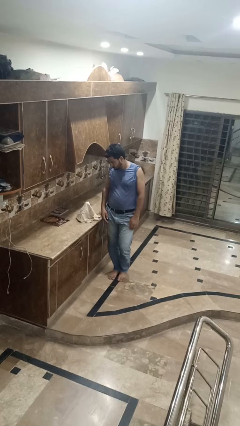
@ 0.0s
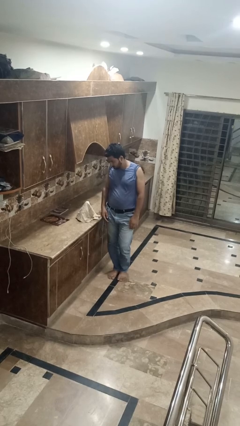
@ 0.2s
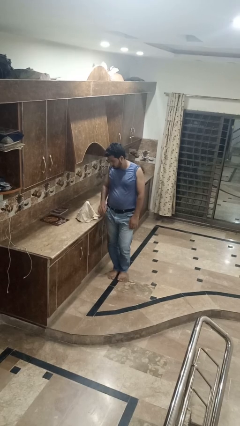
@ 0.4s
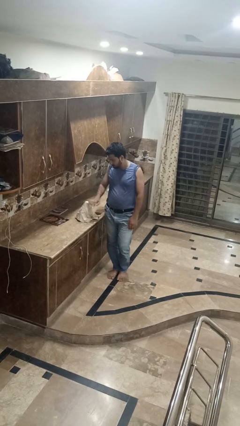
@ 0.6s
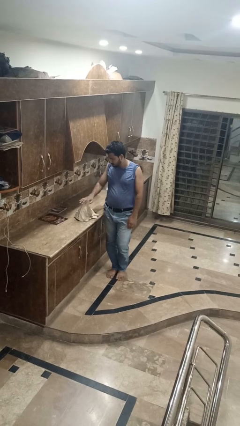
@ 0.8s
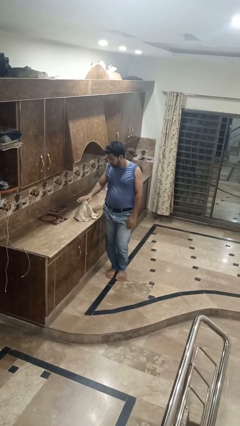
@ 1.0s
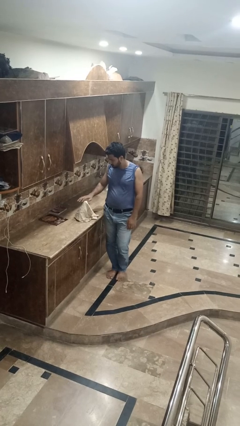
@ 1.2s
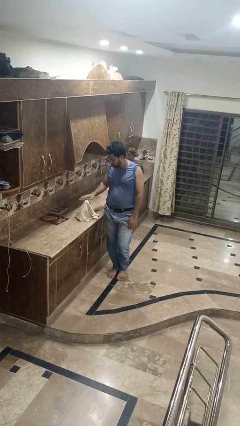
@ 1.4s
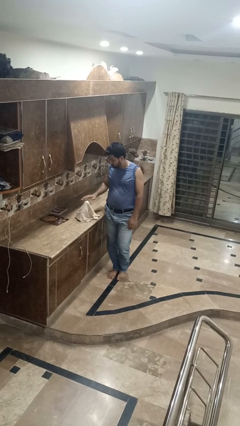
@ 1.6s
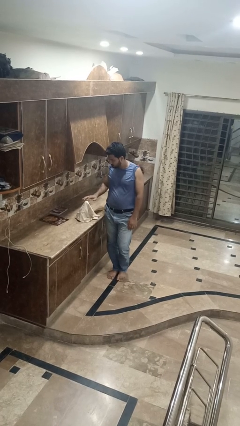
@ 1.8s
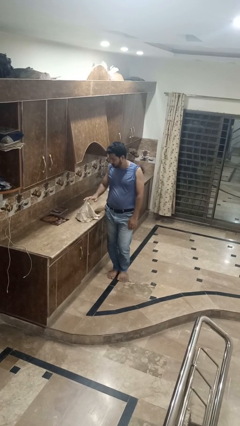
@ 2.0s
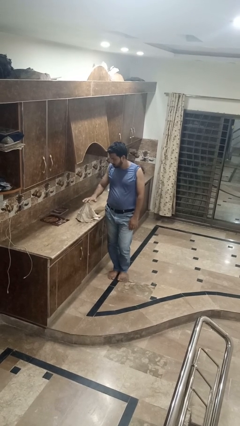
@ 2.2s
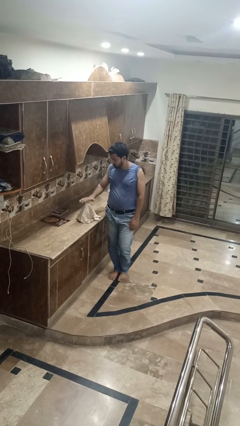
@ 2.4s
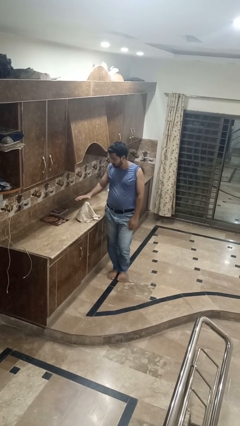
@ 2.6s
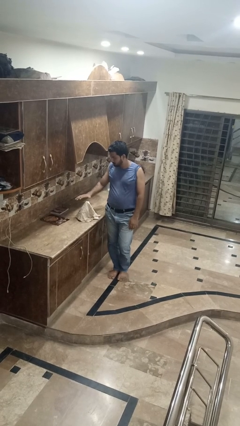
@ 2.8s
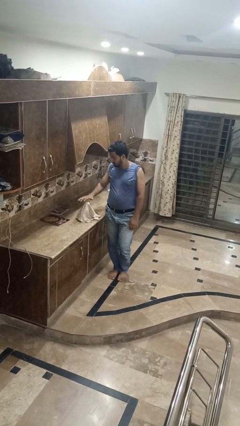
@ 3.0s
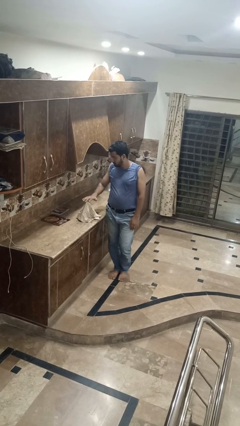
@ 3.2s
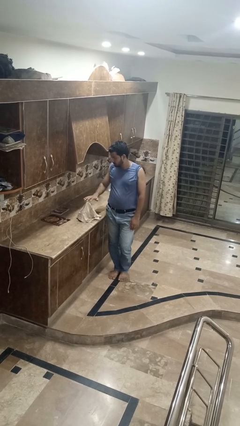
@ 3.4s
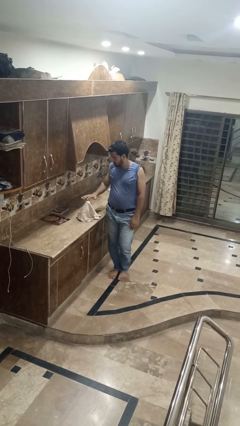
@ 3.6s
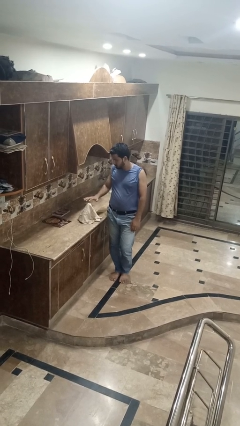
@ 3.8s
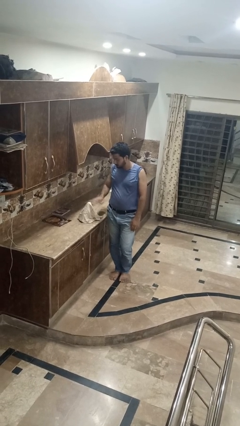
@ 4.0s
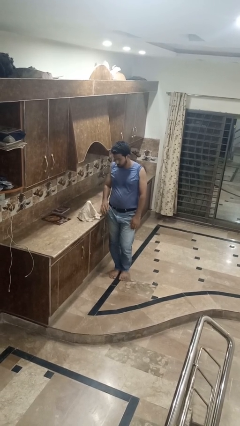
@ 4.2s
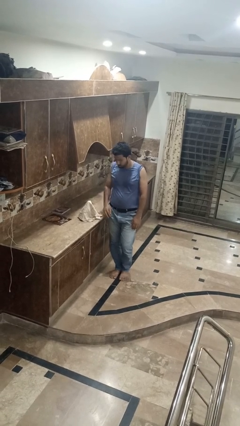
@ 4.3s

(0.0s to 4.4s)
person waves hand over object

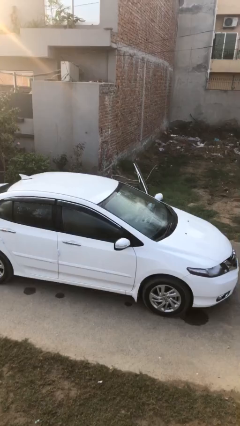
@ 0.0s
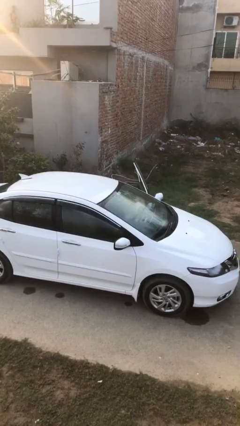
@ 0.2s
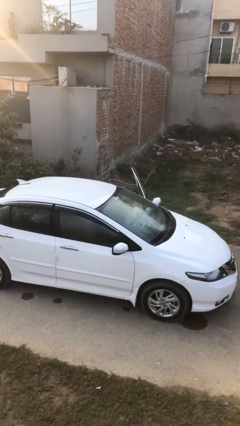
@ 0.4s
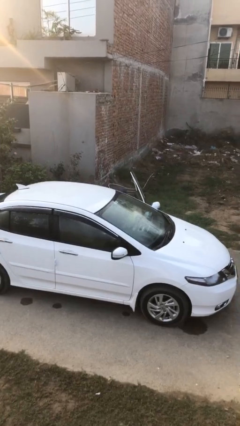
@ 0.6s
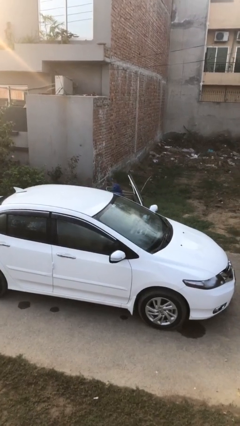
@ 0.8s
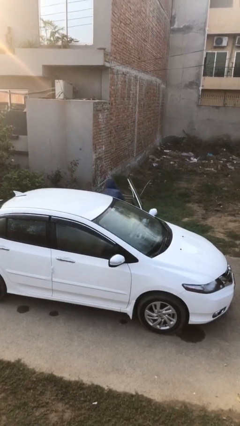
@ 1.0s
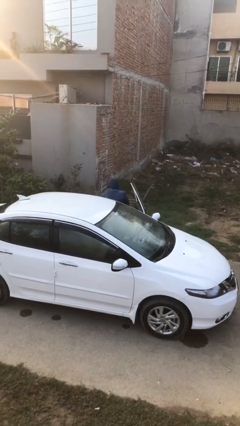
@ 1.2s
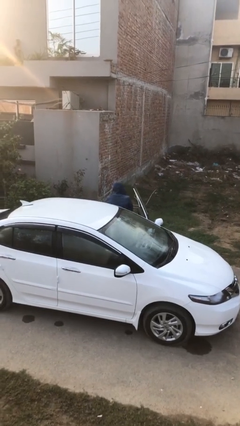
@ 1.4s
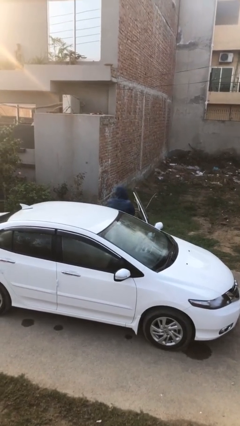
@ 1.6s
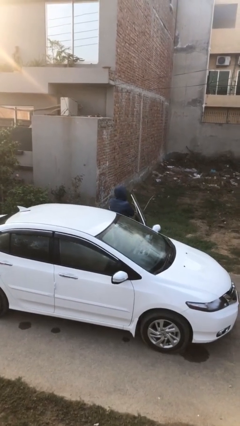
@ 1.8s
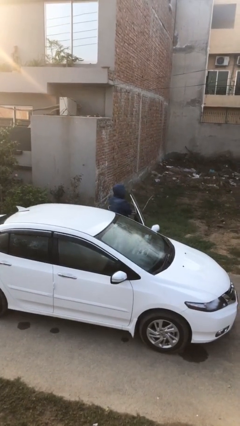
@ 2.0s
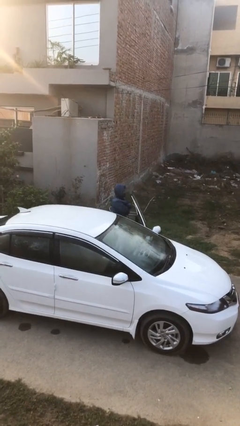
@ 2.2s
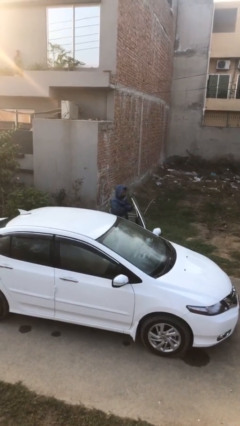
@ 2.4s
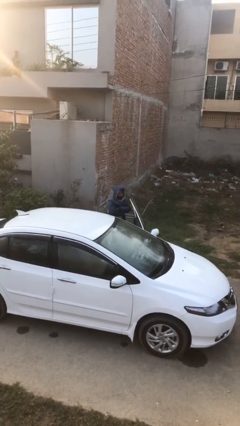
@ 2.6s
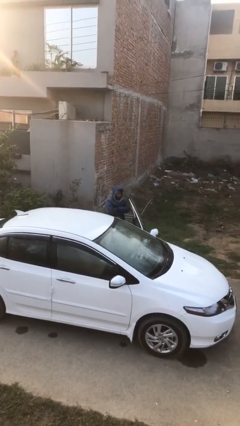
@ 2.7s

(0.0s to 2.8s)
person exits car

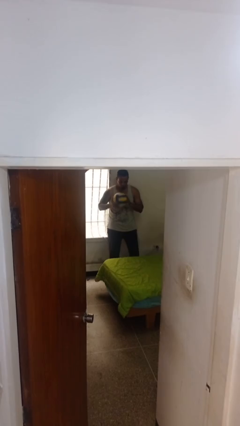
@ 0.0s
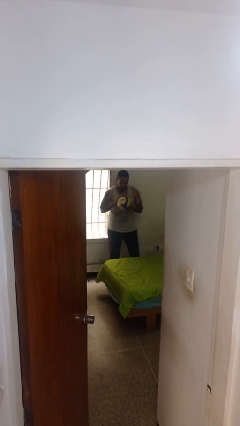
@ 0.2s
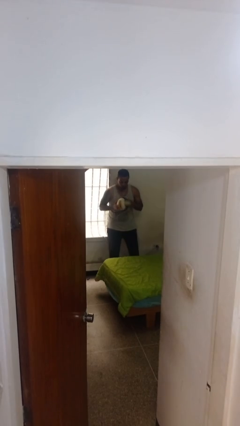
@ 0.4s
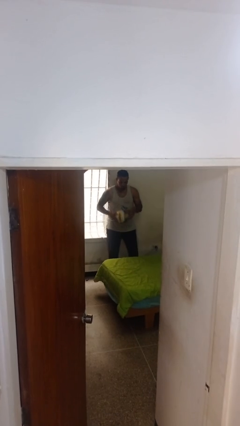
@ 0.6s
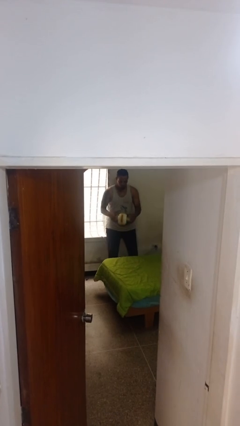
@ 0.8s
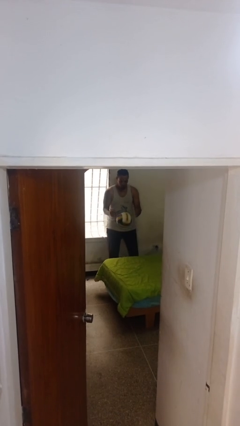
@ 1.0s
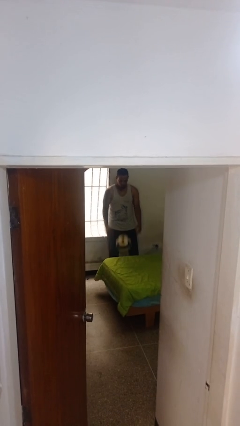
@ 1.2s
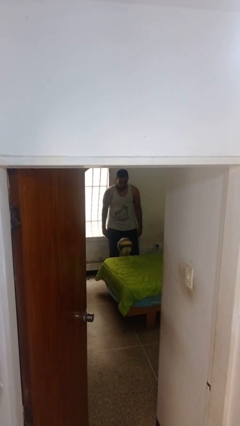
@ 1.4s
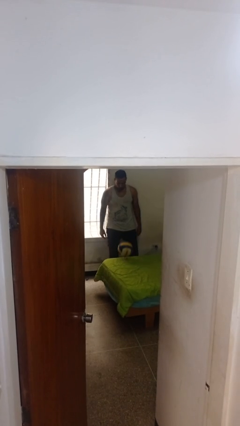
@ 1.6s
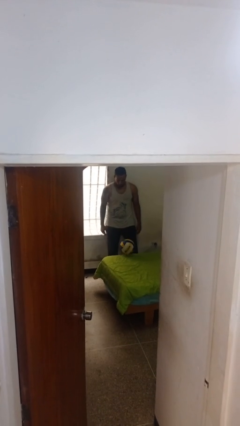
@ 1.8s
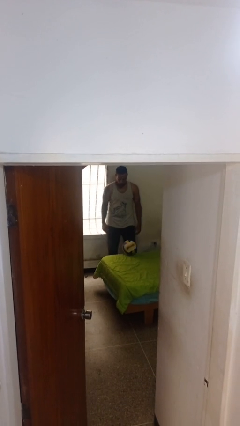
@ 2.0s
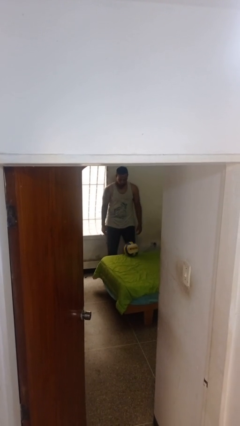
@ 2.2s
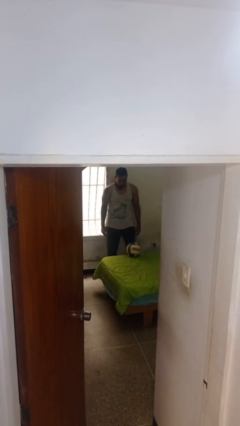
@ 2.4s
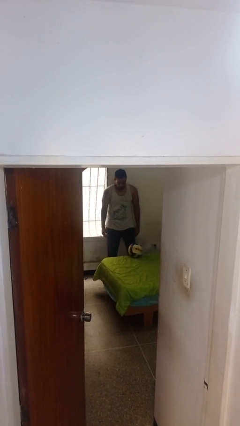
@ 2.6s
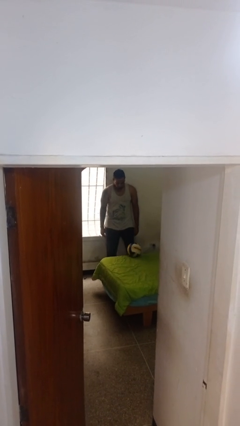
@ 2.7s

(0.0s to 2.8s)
person throws object on bed

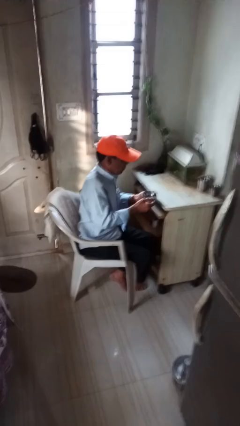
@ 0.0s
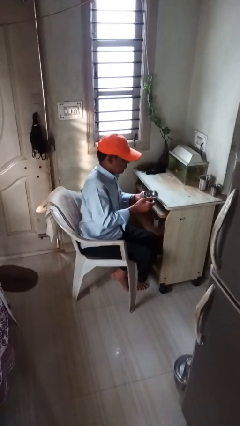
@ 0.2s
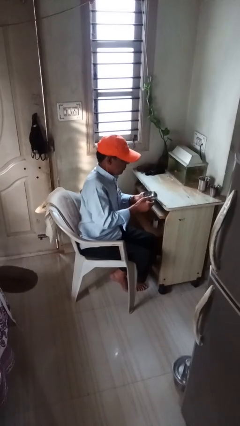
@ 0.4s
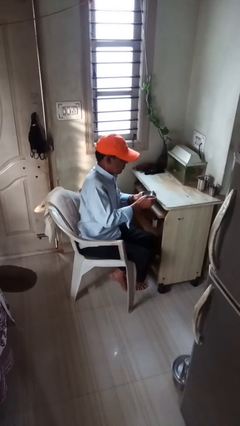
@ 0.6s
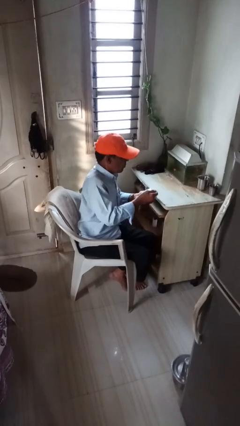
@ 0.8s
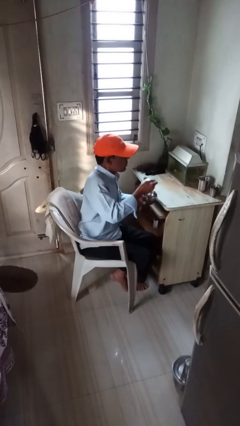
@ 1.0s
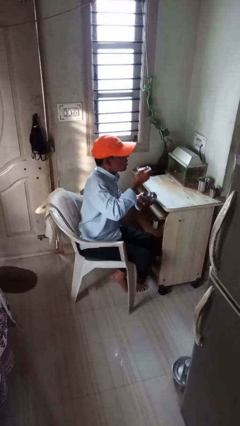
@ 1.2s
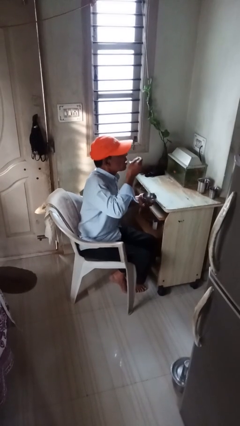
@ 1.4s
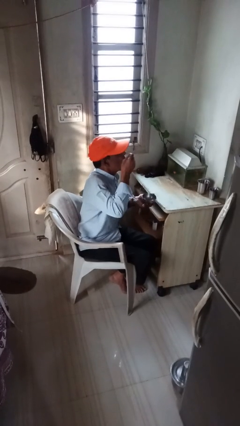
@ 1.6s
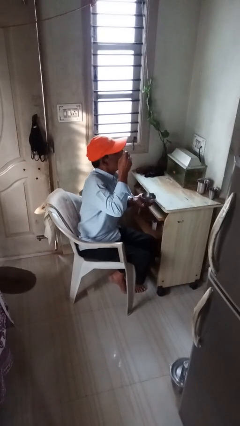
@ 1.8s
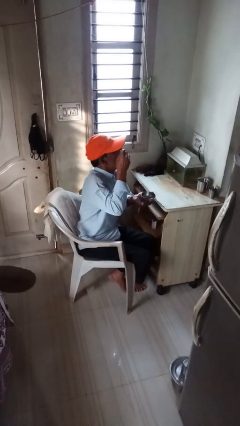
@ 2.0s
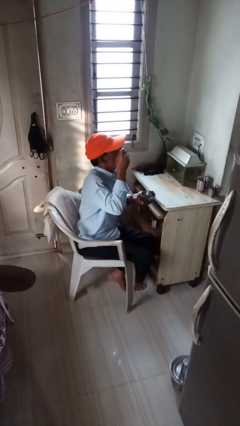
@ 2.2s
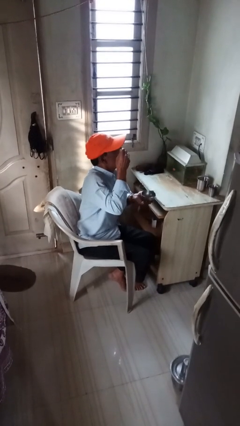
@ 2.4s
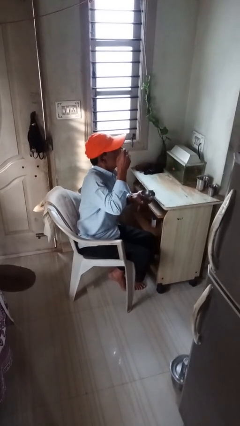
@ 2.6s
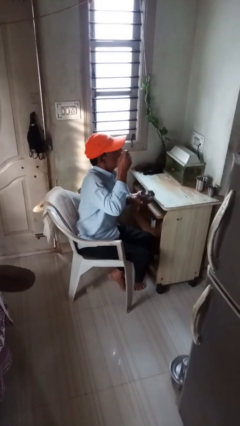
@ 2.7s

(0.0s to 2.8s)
person eats with utensil

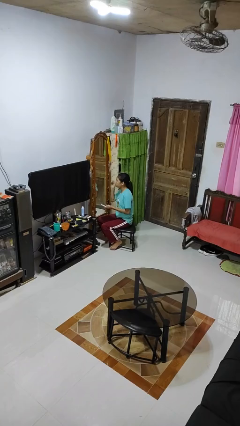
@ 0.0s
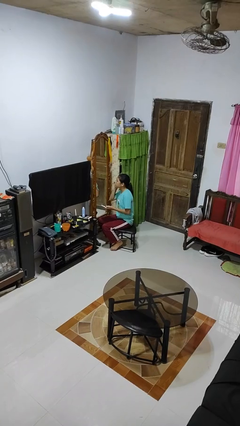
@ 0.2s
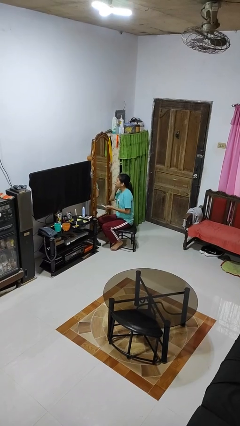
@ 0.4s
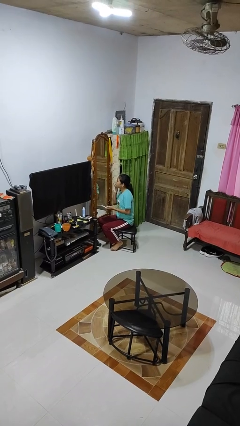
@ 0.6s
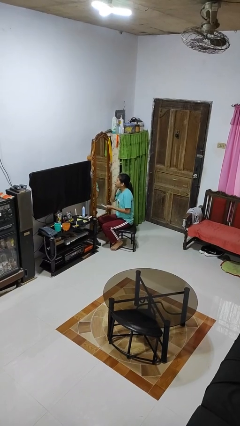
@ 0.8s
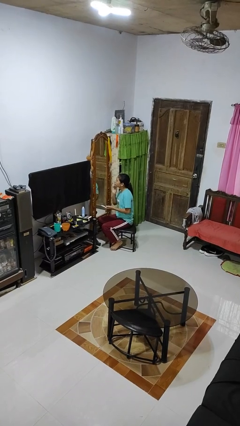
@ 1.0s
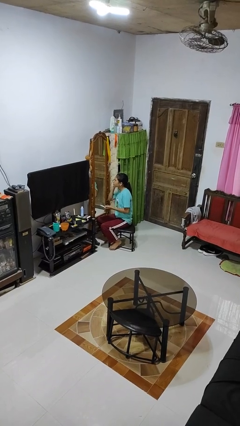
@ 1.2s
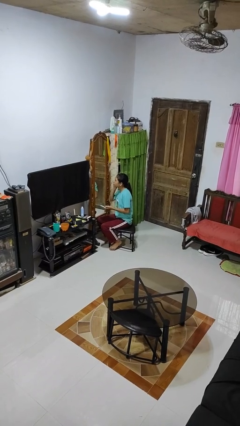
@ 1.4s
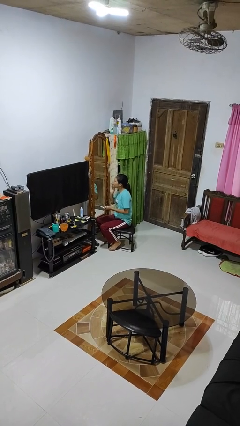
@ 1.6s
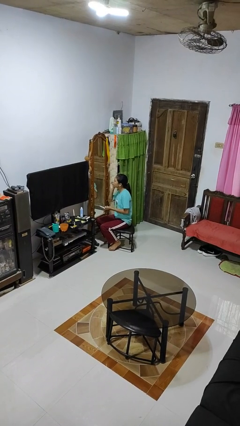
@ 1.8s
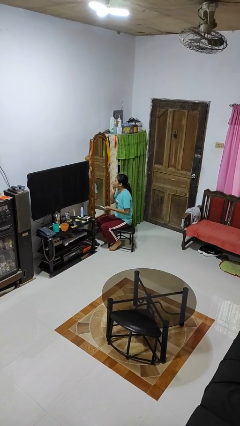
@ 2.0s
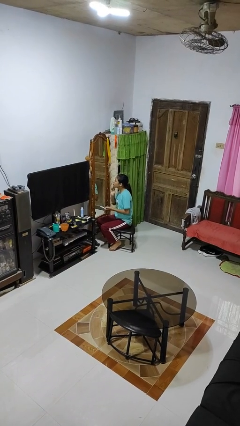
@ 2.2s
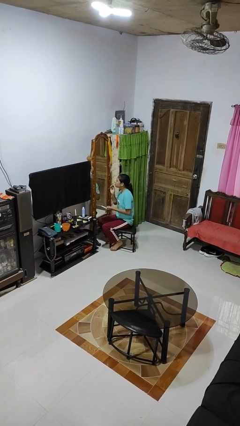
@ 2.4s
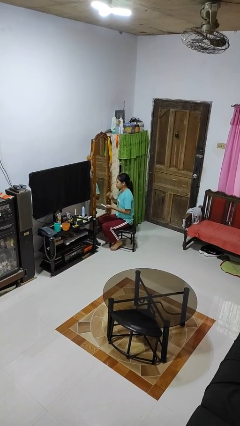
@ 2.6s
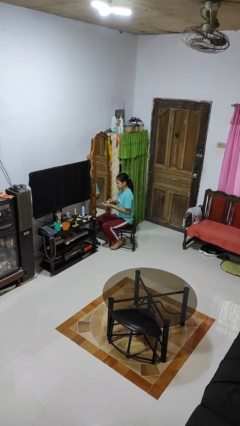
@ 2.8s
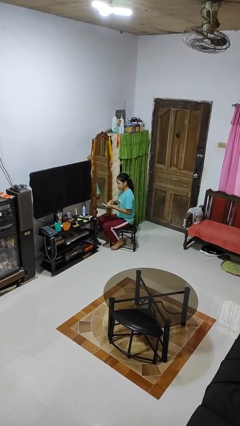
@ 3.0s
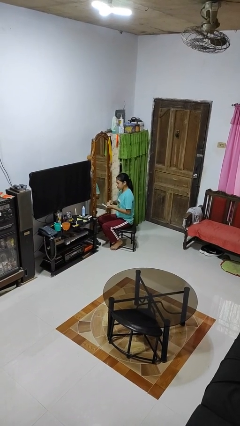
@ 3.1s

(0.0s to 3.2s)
person applies foundation makeup

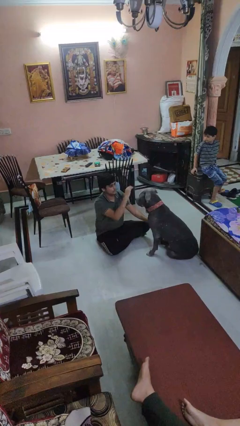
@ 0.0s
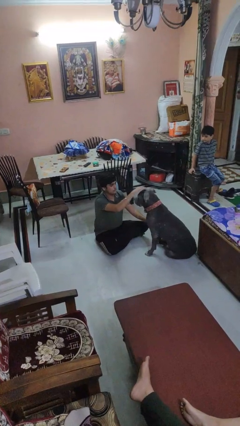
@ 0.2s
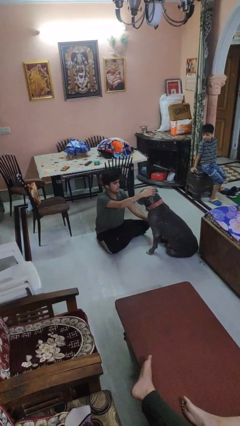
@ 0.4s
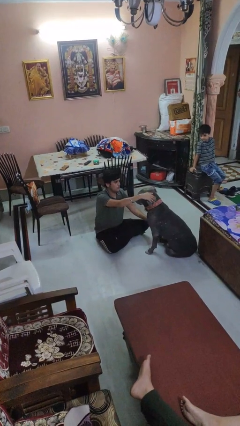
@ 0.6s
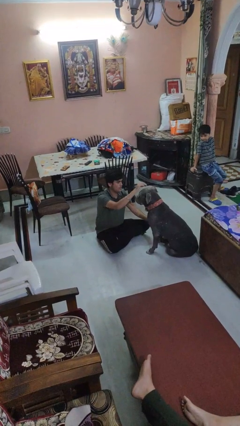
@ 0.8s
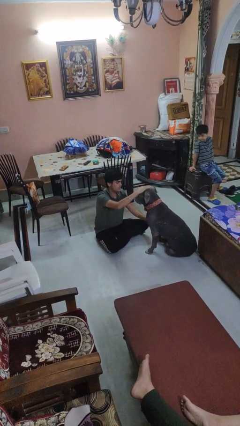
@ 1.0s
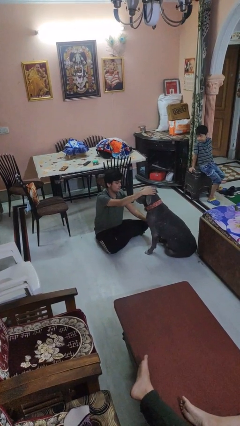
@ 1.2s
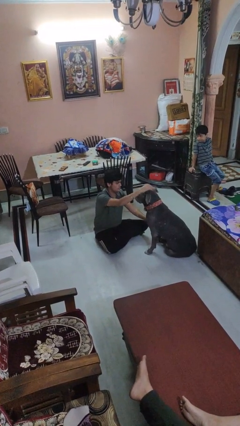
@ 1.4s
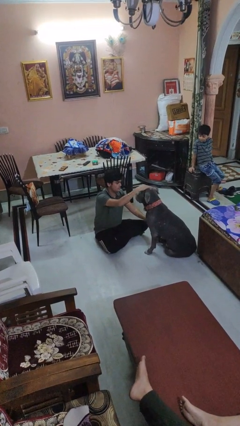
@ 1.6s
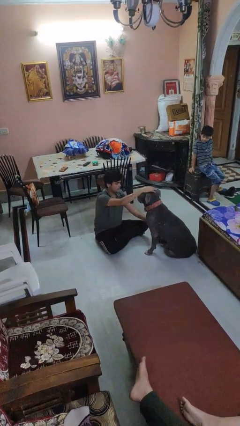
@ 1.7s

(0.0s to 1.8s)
person pets dog
